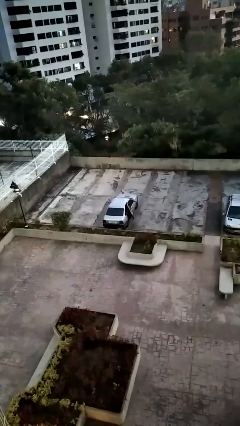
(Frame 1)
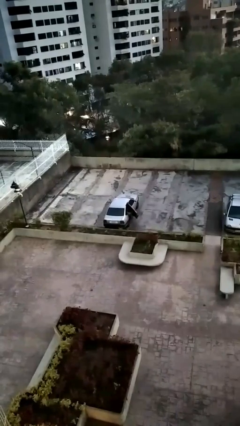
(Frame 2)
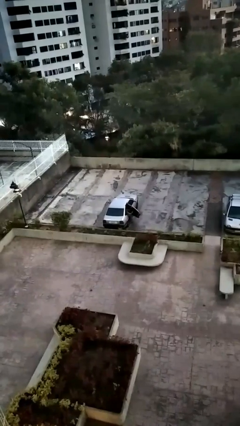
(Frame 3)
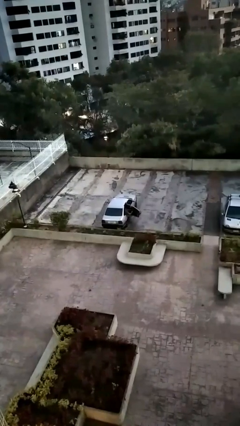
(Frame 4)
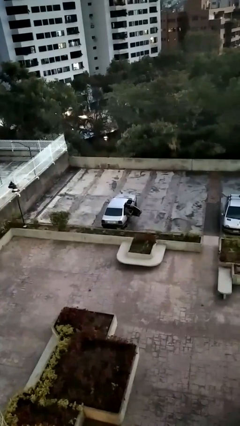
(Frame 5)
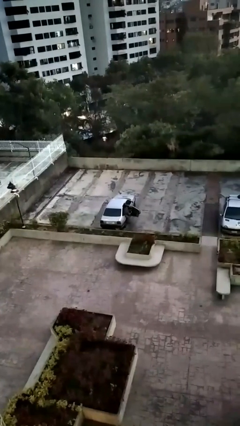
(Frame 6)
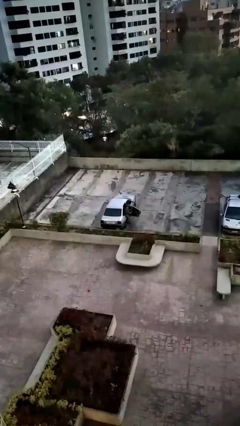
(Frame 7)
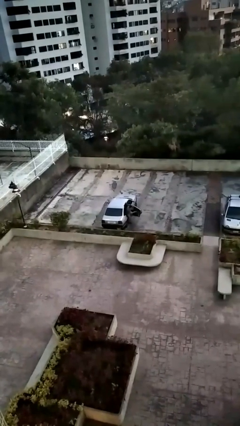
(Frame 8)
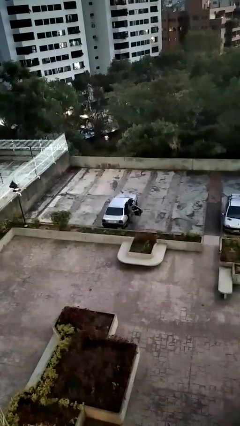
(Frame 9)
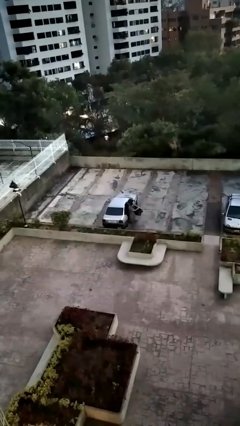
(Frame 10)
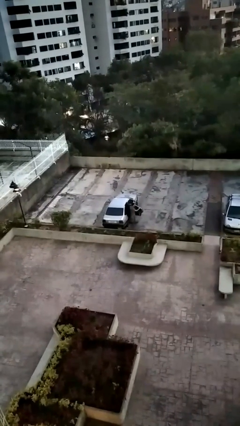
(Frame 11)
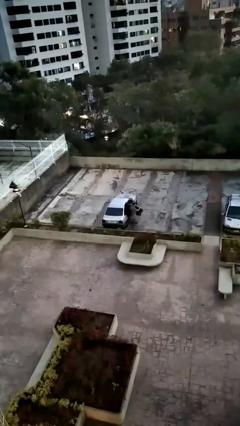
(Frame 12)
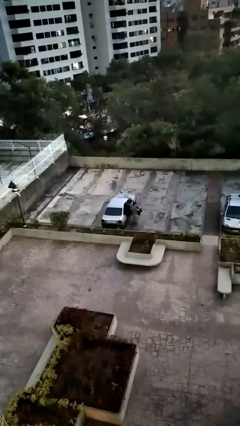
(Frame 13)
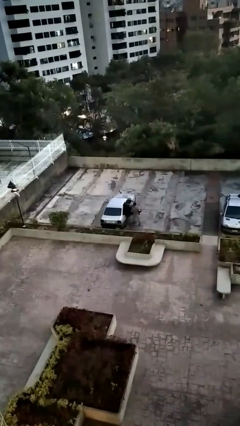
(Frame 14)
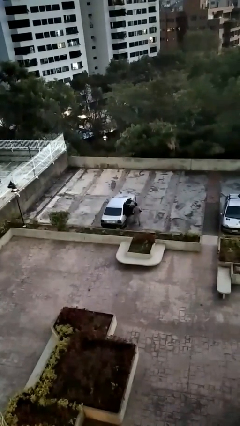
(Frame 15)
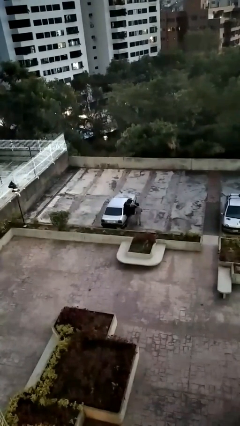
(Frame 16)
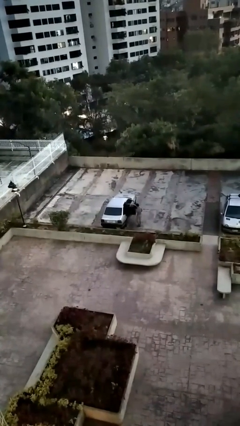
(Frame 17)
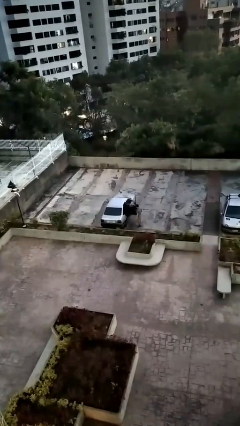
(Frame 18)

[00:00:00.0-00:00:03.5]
car drops off person

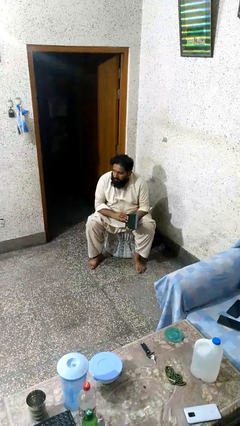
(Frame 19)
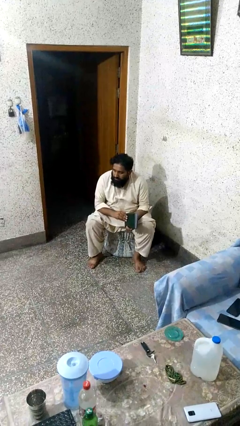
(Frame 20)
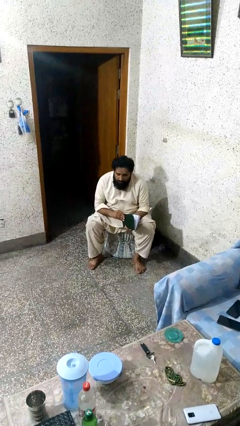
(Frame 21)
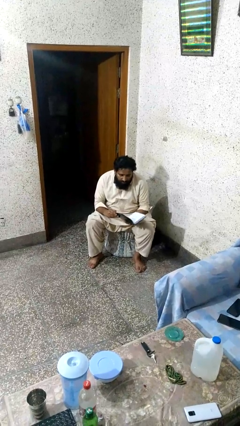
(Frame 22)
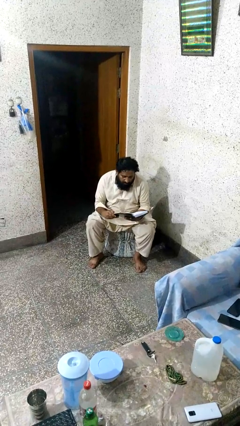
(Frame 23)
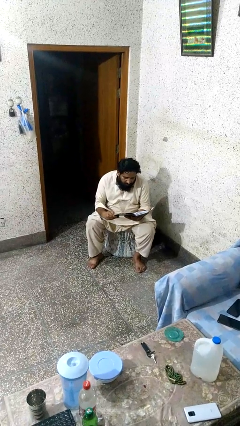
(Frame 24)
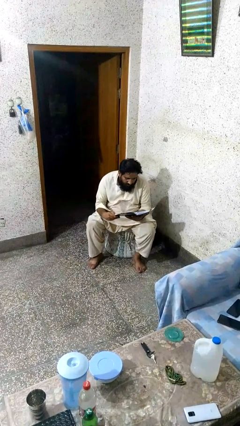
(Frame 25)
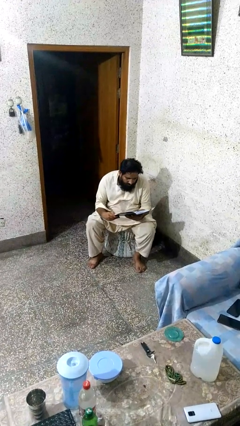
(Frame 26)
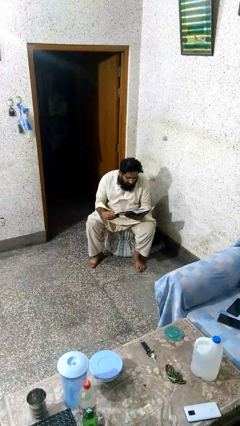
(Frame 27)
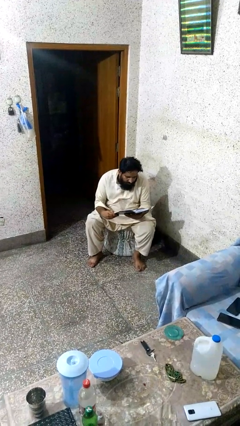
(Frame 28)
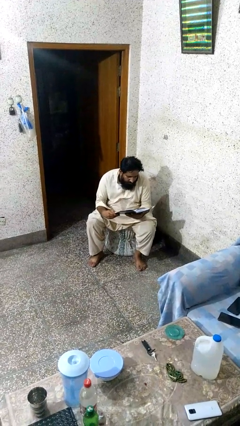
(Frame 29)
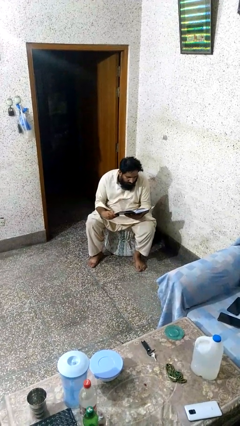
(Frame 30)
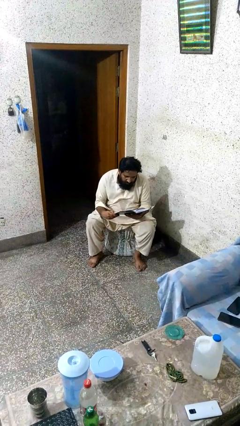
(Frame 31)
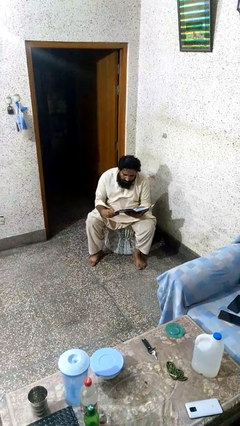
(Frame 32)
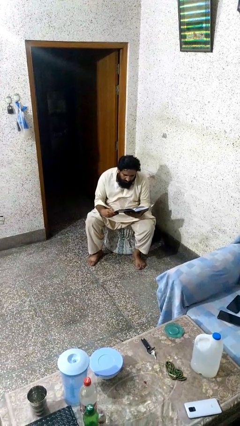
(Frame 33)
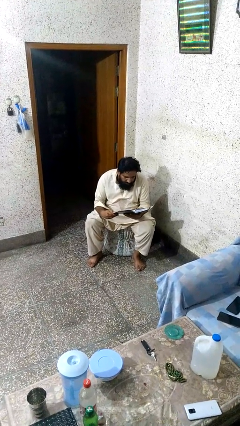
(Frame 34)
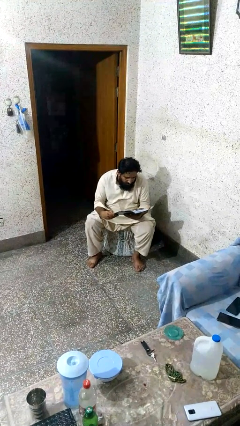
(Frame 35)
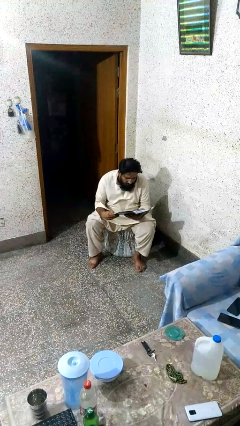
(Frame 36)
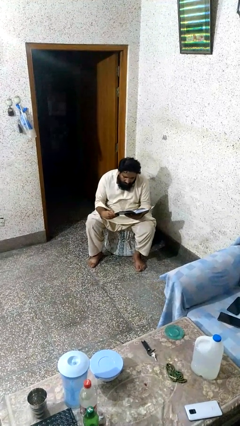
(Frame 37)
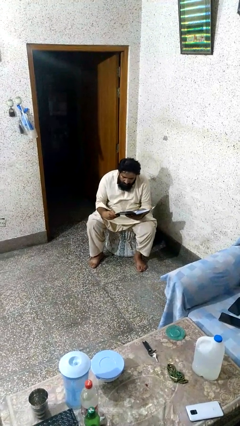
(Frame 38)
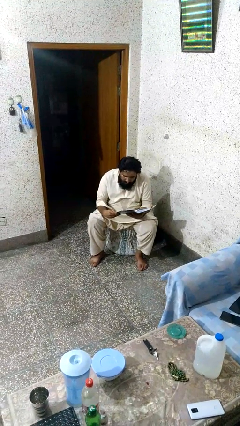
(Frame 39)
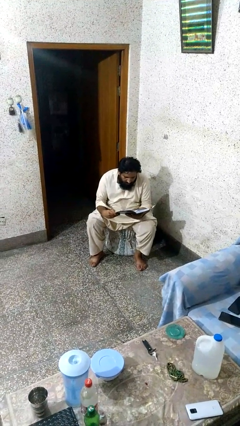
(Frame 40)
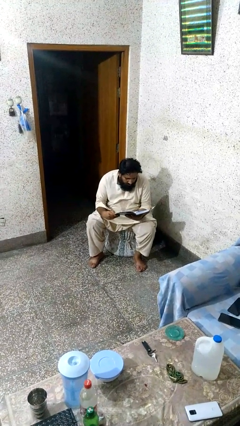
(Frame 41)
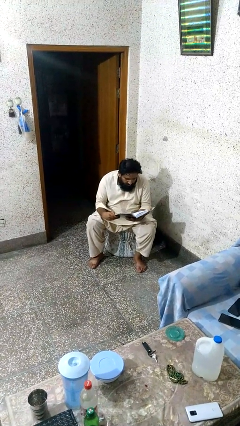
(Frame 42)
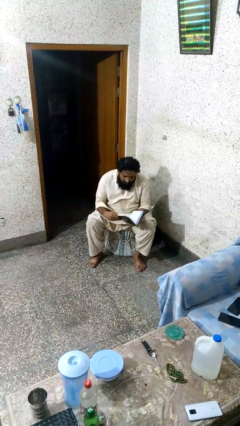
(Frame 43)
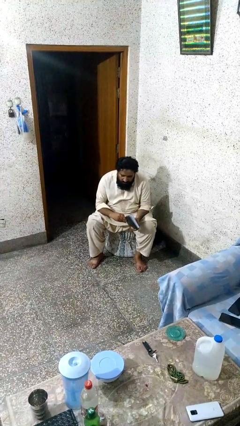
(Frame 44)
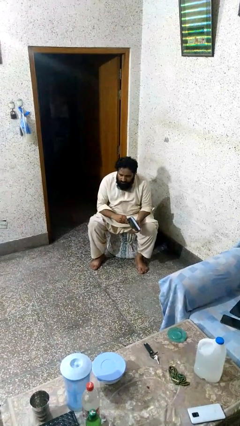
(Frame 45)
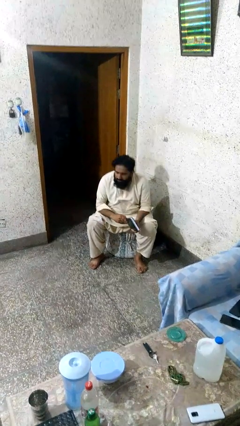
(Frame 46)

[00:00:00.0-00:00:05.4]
person reads book

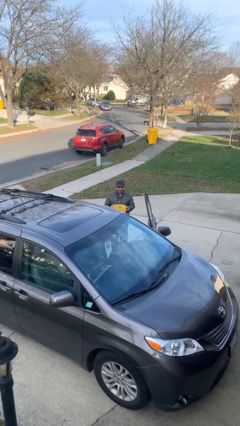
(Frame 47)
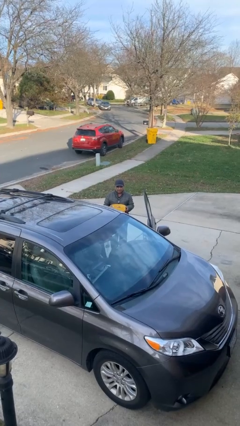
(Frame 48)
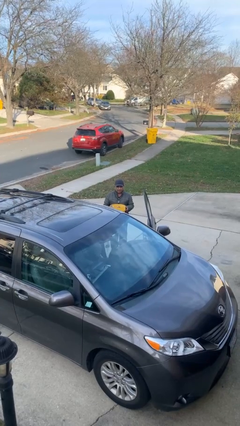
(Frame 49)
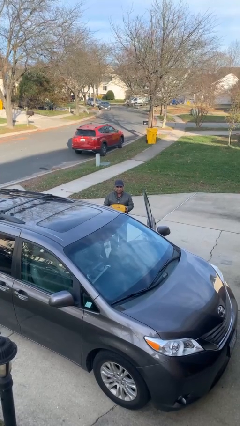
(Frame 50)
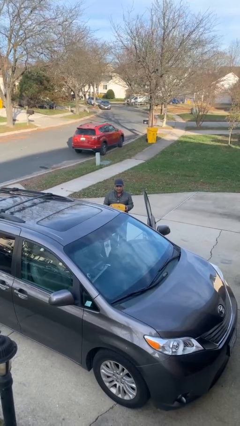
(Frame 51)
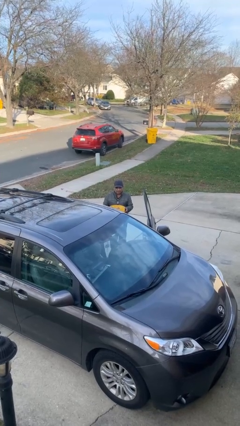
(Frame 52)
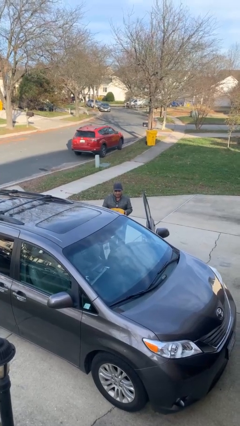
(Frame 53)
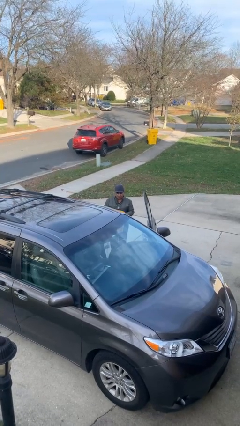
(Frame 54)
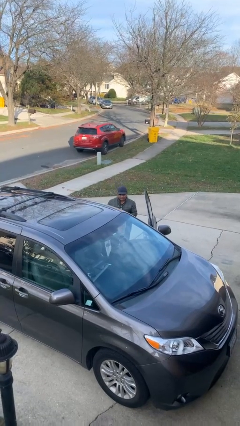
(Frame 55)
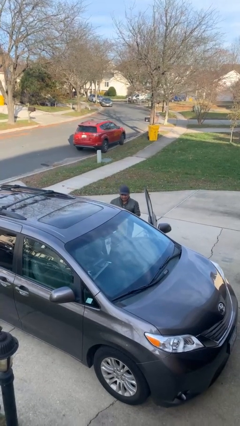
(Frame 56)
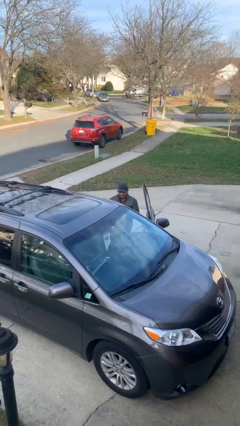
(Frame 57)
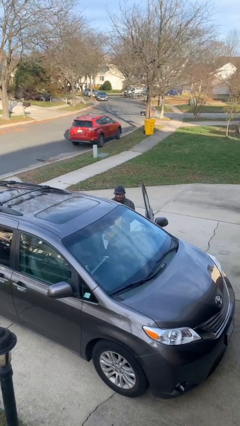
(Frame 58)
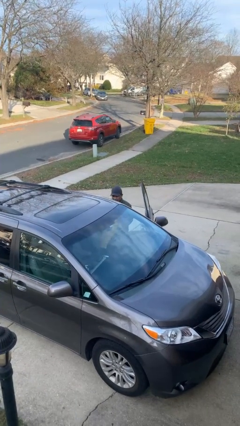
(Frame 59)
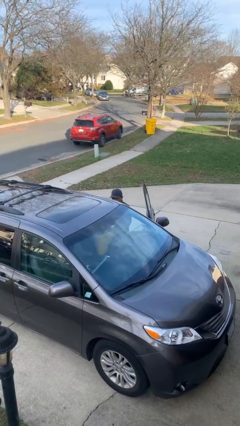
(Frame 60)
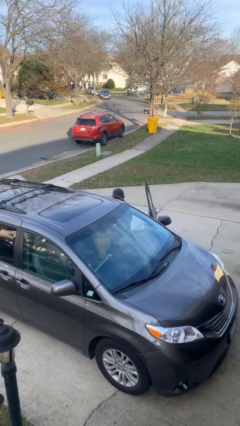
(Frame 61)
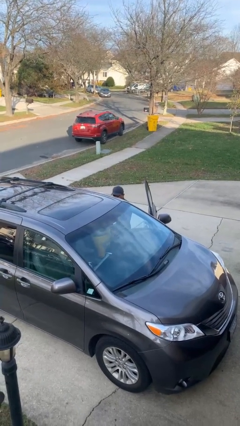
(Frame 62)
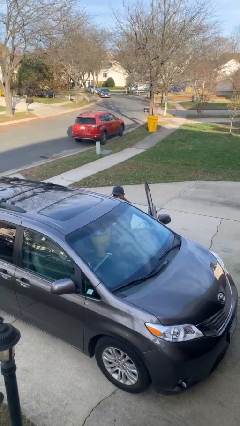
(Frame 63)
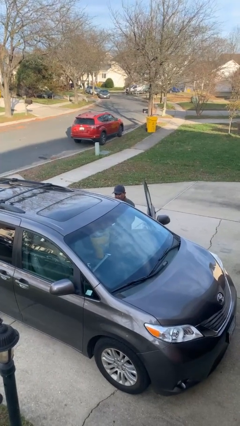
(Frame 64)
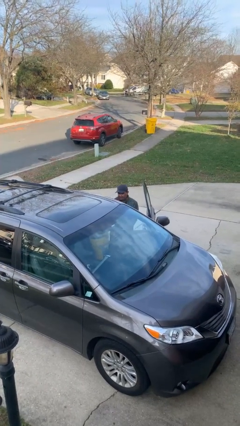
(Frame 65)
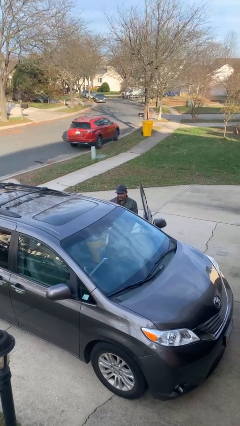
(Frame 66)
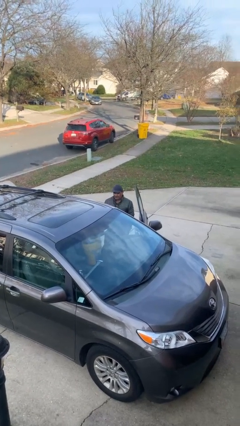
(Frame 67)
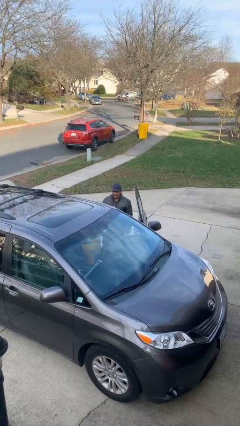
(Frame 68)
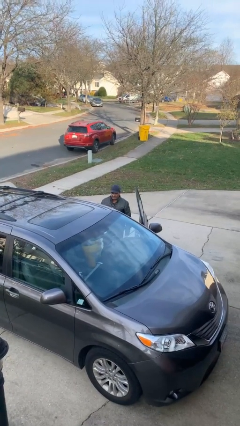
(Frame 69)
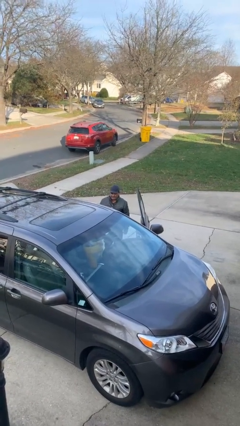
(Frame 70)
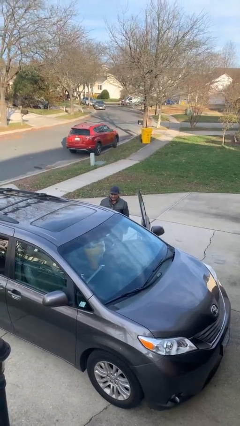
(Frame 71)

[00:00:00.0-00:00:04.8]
person loads car

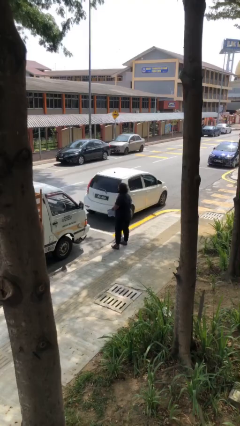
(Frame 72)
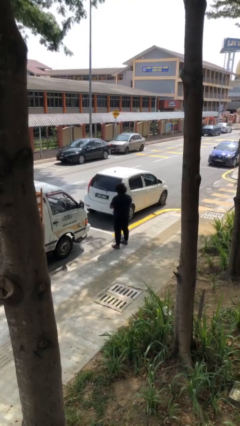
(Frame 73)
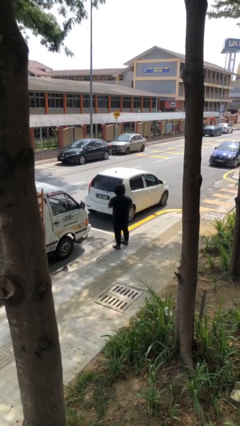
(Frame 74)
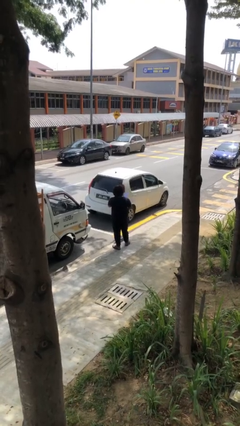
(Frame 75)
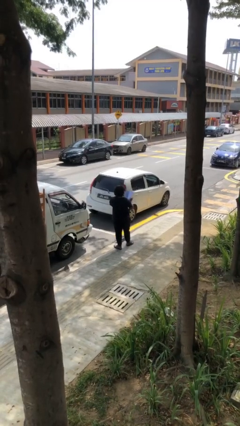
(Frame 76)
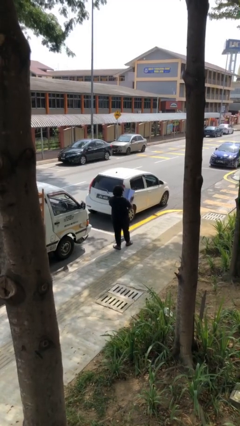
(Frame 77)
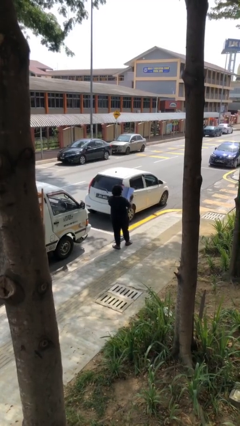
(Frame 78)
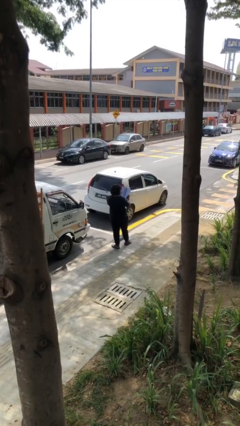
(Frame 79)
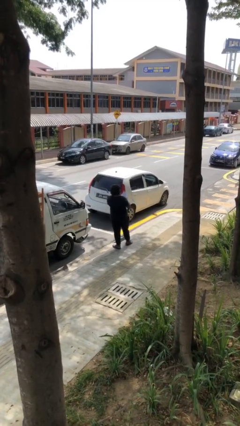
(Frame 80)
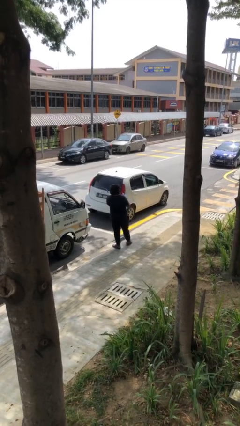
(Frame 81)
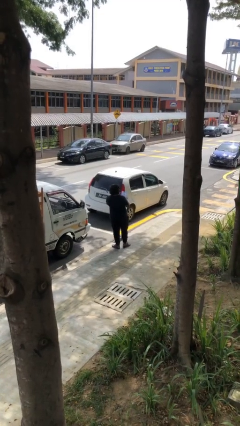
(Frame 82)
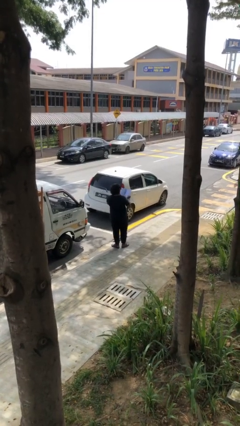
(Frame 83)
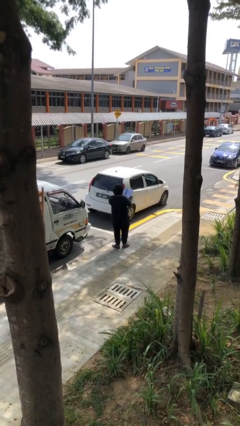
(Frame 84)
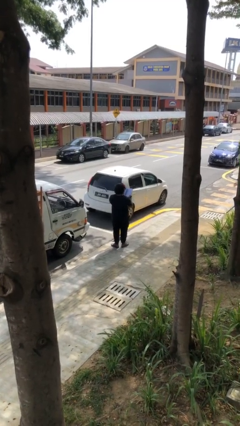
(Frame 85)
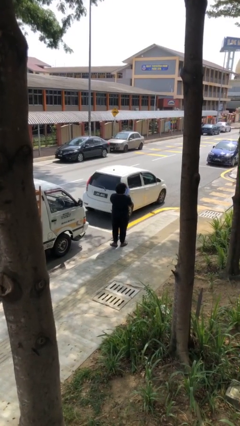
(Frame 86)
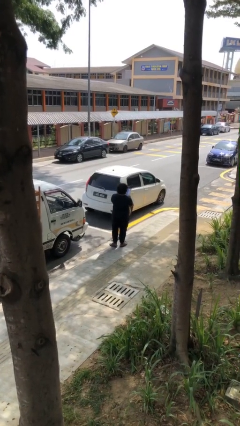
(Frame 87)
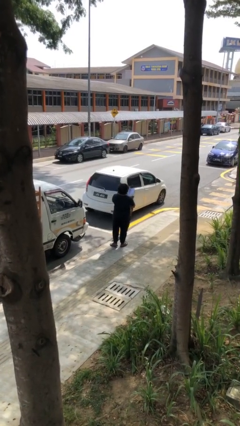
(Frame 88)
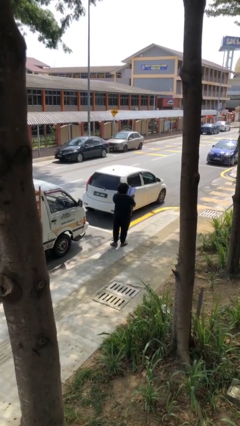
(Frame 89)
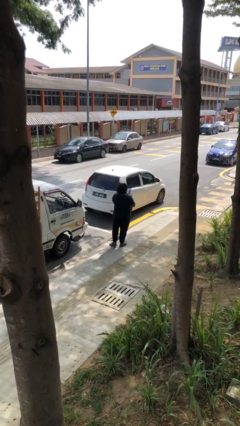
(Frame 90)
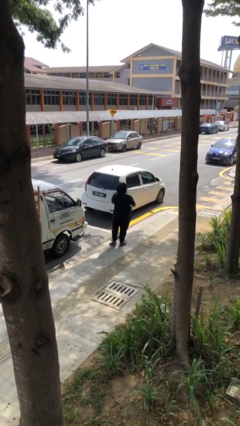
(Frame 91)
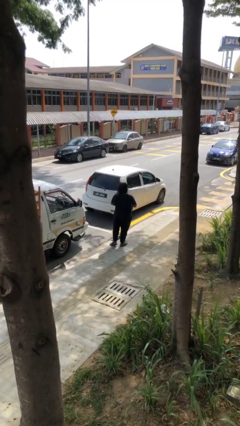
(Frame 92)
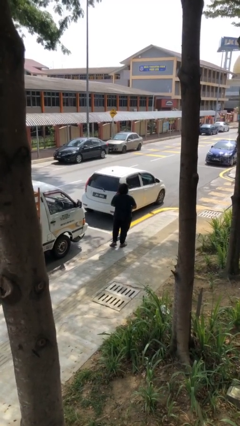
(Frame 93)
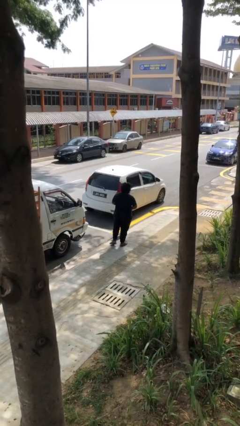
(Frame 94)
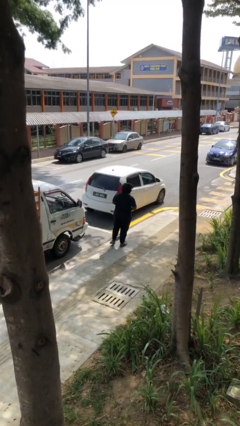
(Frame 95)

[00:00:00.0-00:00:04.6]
person reads document
